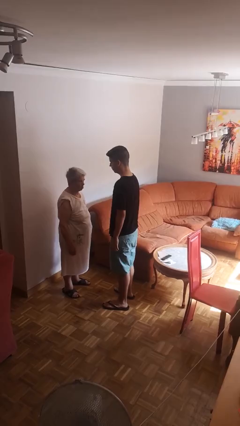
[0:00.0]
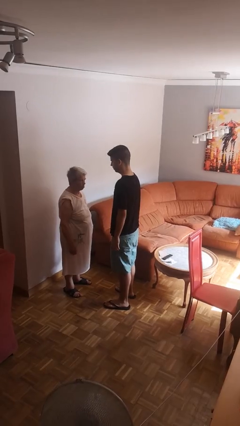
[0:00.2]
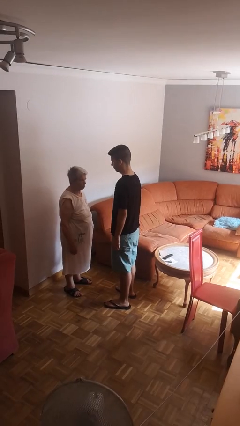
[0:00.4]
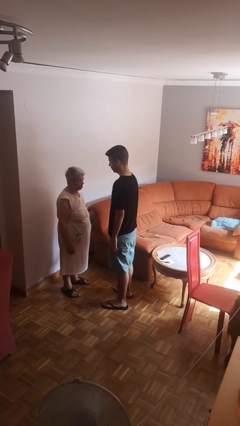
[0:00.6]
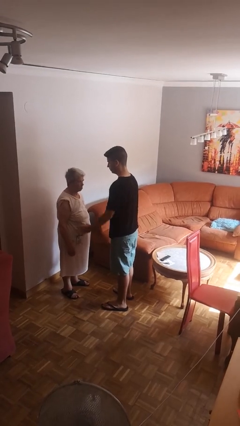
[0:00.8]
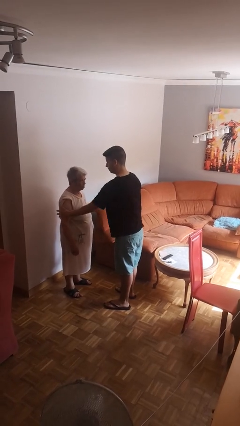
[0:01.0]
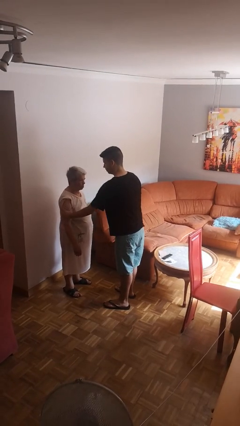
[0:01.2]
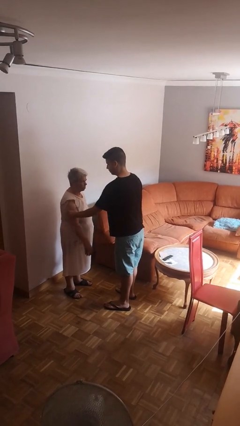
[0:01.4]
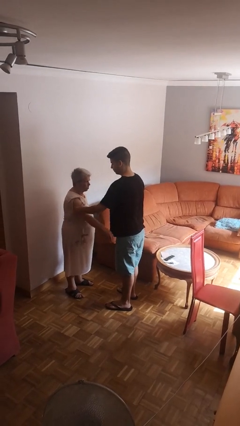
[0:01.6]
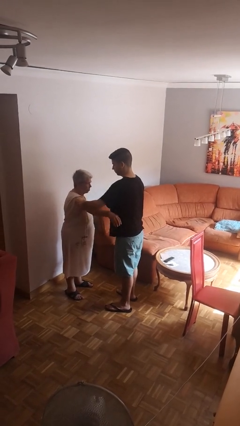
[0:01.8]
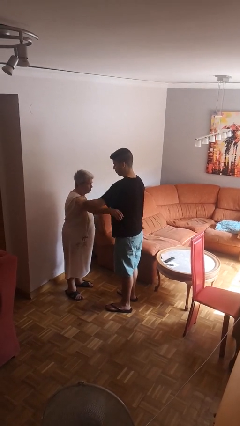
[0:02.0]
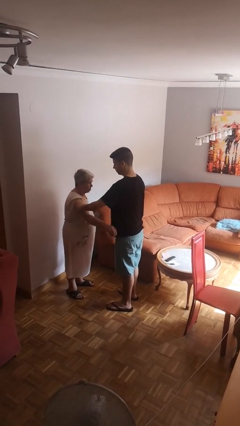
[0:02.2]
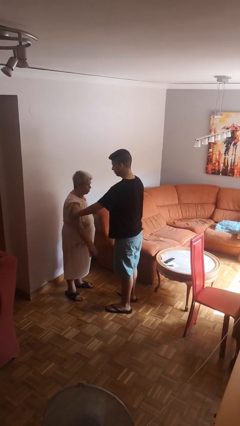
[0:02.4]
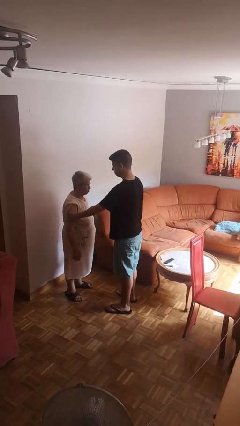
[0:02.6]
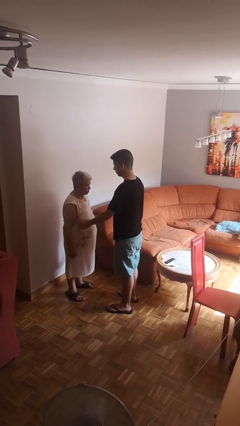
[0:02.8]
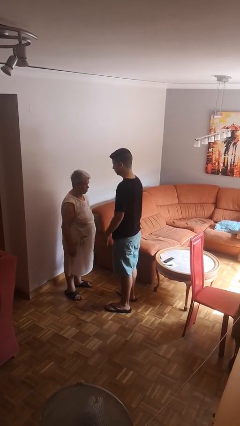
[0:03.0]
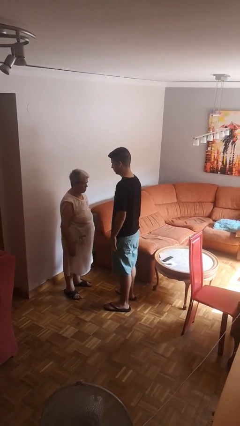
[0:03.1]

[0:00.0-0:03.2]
person grabs person by bicep

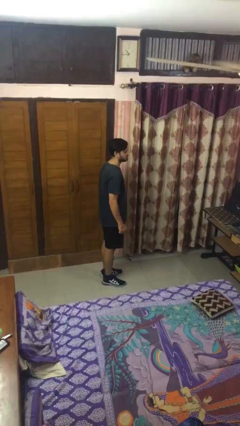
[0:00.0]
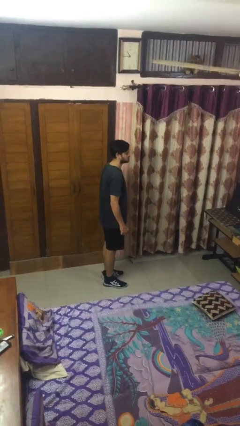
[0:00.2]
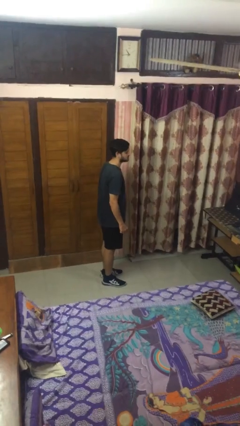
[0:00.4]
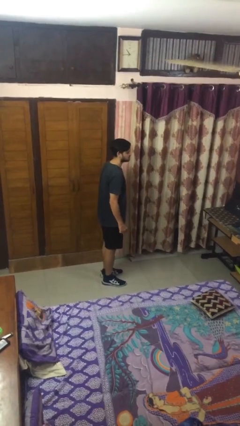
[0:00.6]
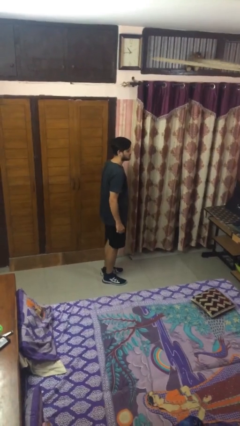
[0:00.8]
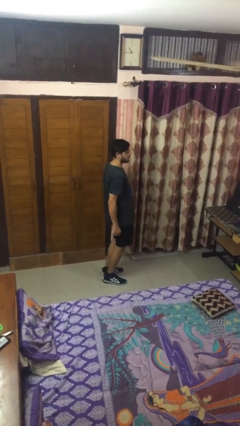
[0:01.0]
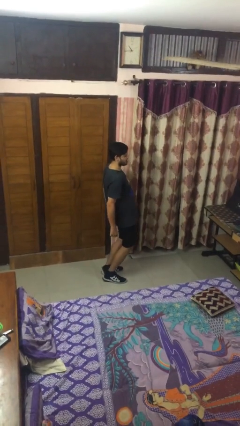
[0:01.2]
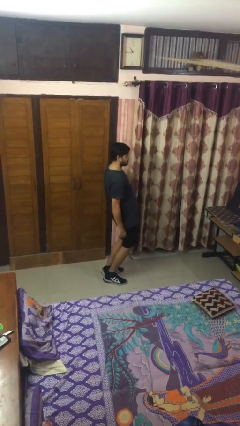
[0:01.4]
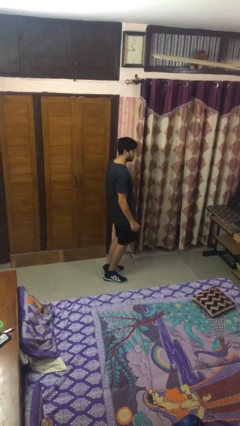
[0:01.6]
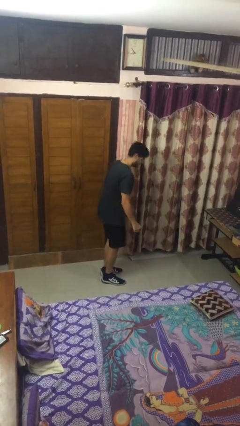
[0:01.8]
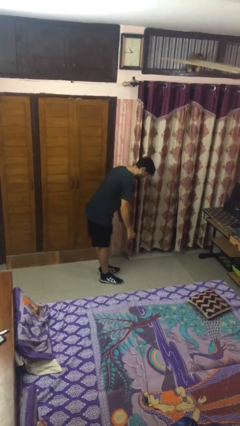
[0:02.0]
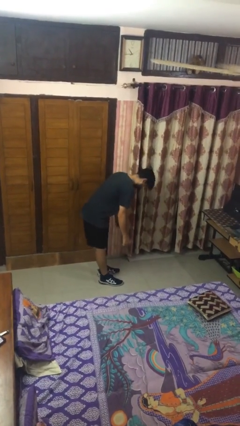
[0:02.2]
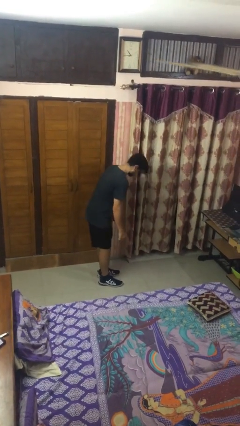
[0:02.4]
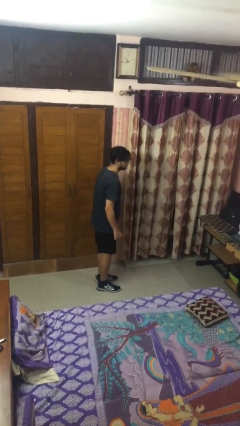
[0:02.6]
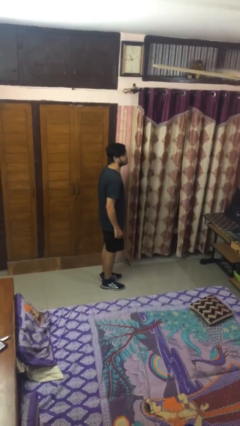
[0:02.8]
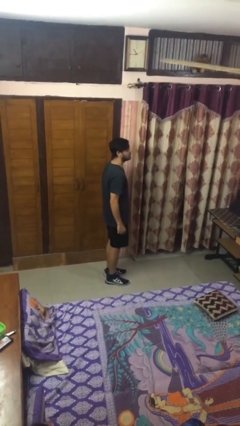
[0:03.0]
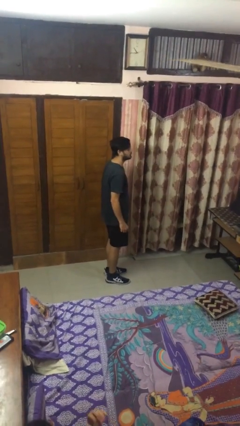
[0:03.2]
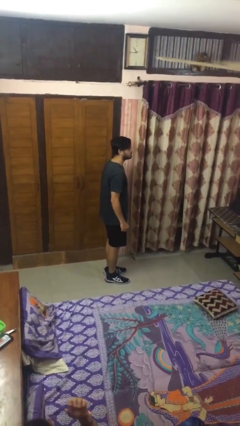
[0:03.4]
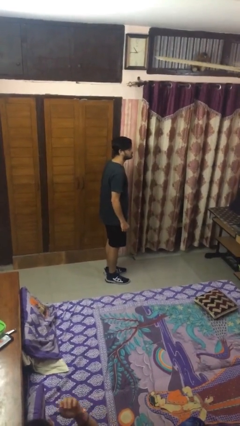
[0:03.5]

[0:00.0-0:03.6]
person wiggles hips

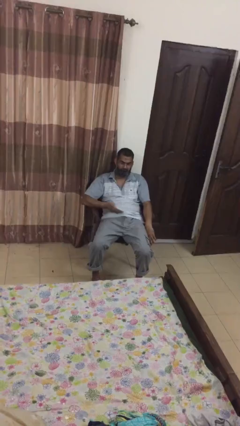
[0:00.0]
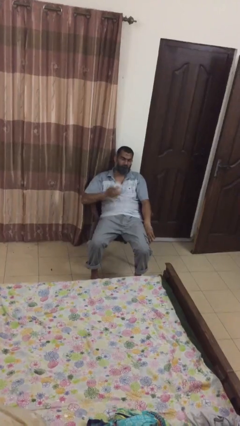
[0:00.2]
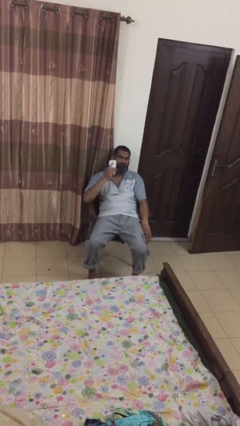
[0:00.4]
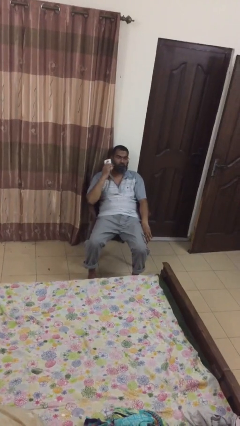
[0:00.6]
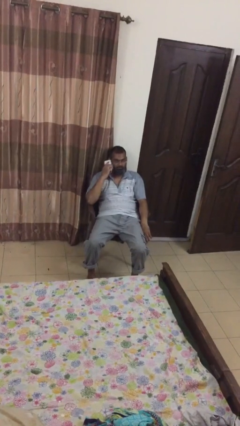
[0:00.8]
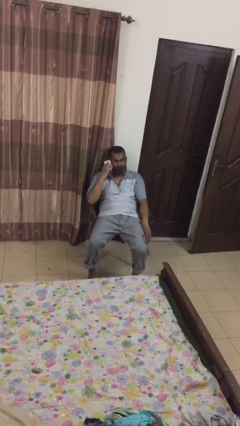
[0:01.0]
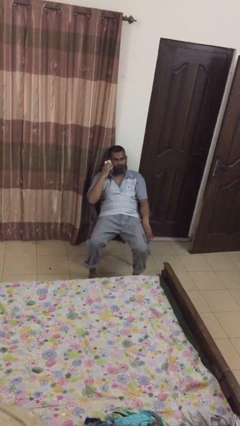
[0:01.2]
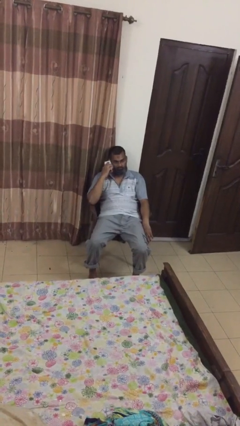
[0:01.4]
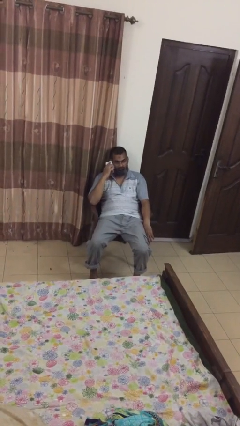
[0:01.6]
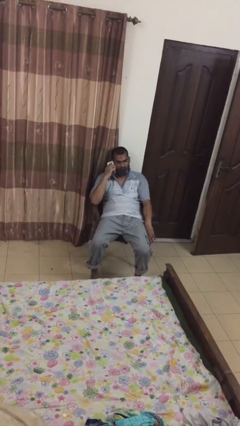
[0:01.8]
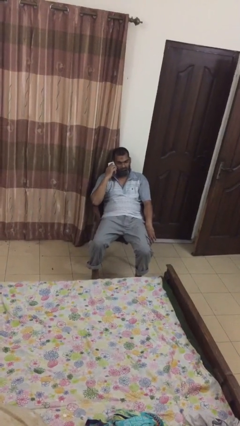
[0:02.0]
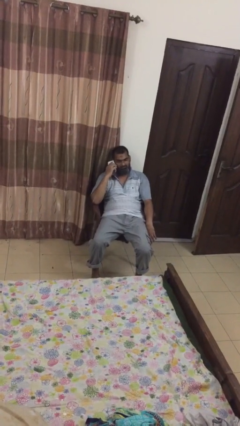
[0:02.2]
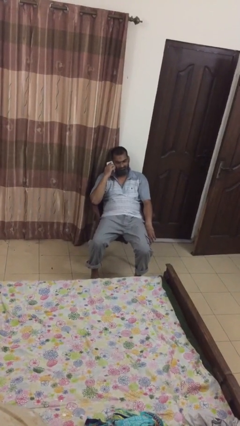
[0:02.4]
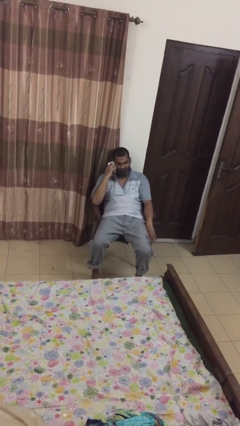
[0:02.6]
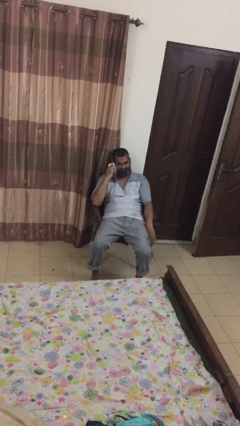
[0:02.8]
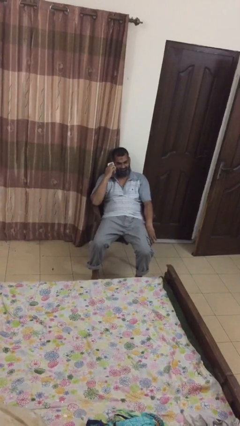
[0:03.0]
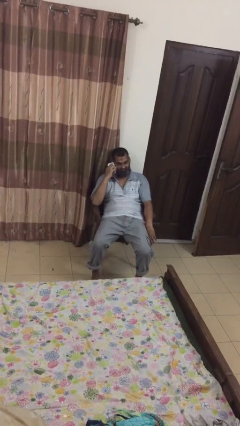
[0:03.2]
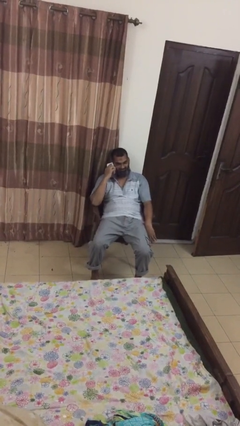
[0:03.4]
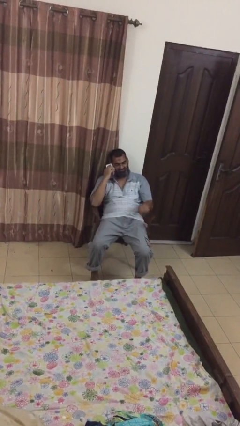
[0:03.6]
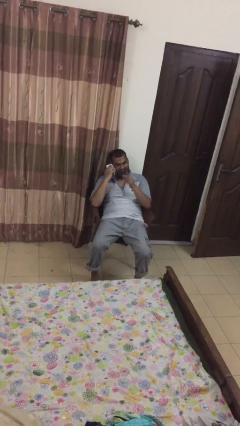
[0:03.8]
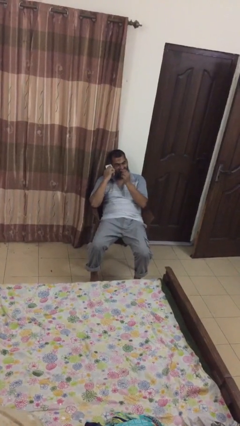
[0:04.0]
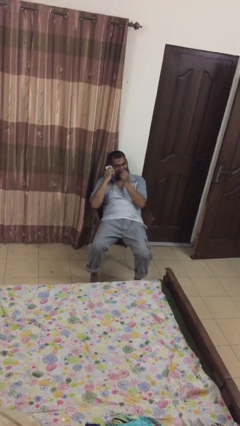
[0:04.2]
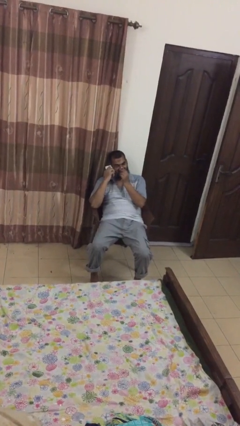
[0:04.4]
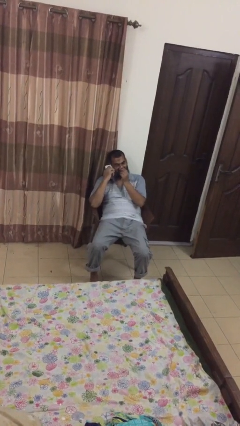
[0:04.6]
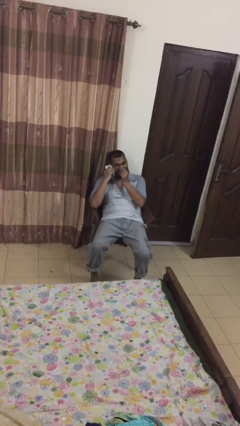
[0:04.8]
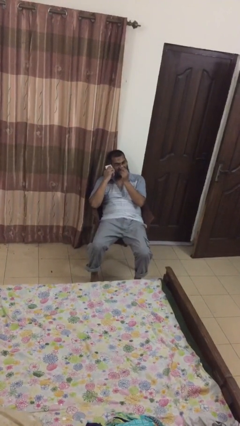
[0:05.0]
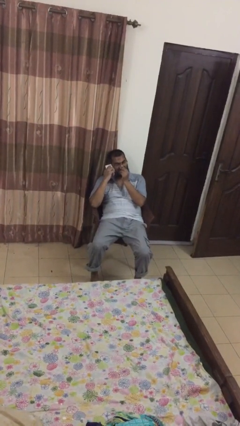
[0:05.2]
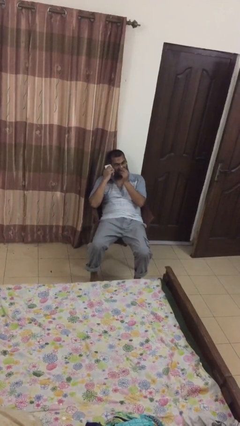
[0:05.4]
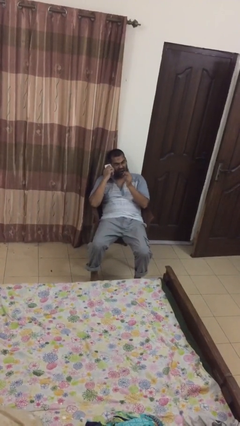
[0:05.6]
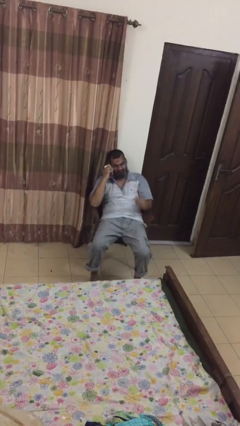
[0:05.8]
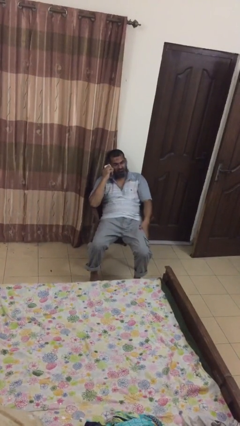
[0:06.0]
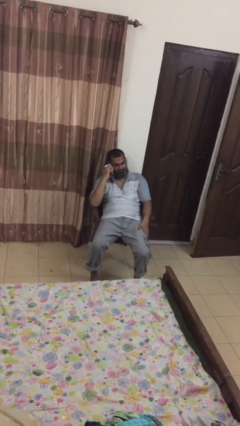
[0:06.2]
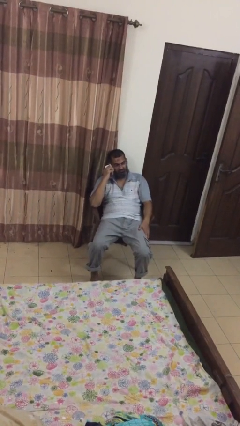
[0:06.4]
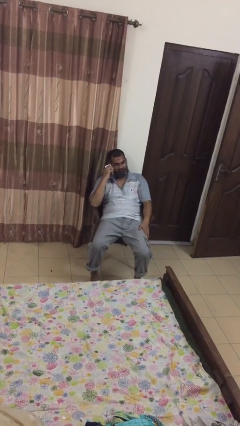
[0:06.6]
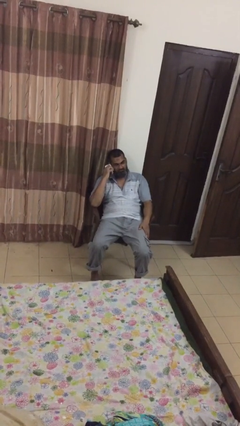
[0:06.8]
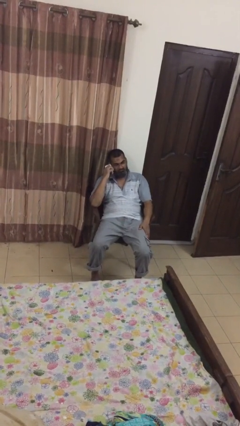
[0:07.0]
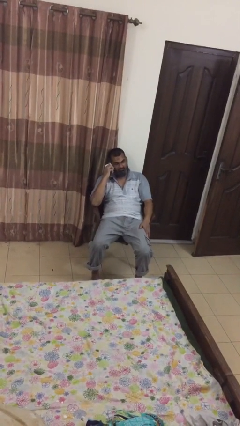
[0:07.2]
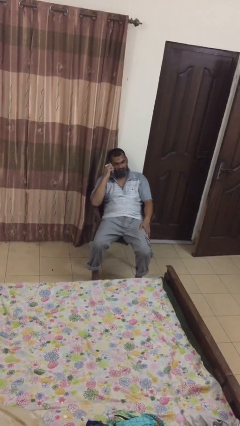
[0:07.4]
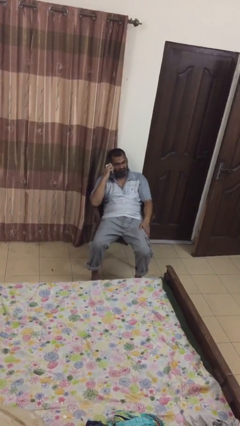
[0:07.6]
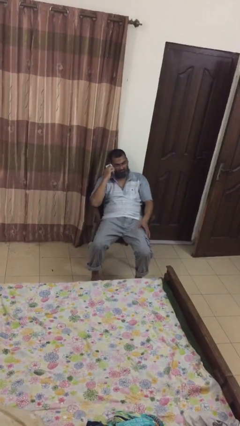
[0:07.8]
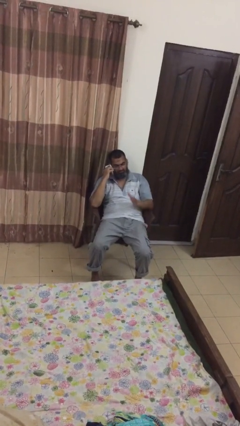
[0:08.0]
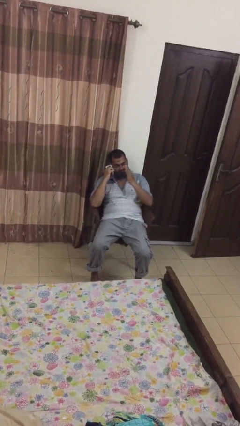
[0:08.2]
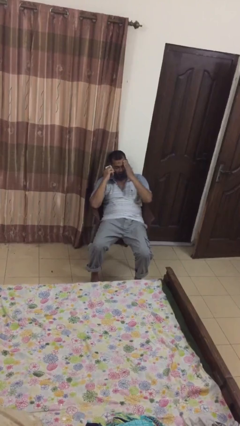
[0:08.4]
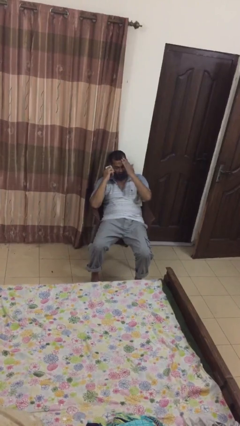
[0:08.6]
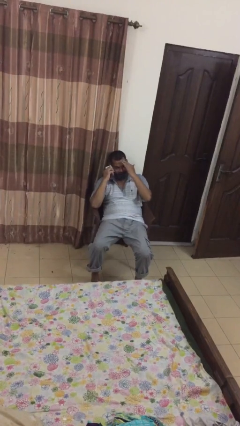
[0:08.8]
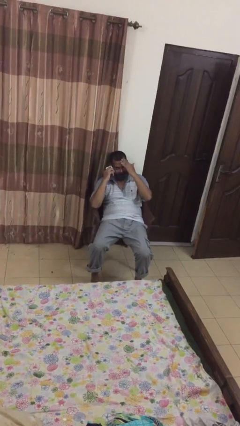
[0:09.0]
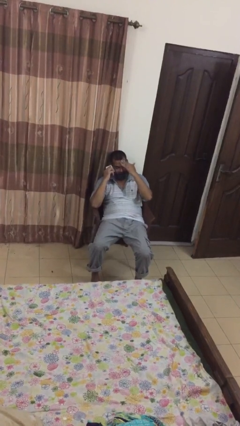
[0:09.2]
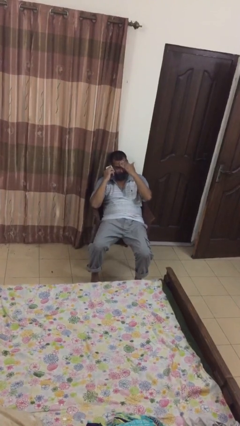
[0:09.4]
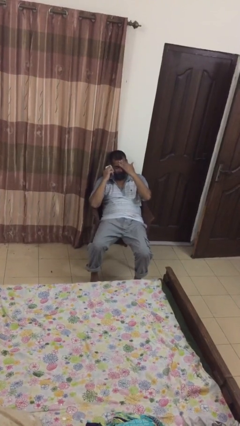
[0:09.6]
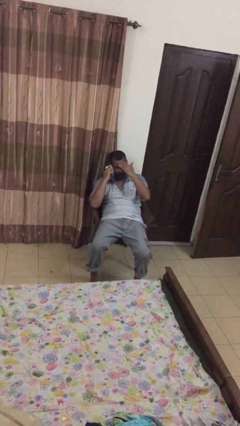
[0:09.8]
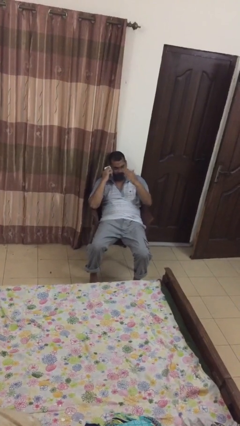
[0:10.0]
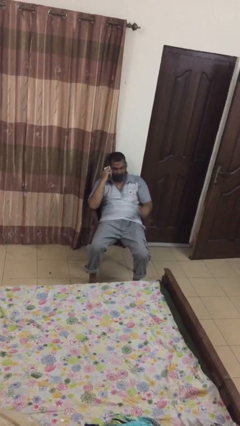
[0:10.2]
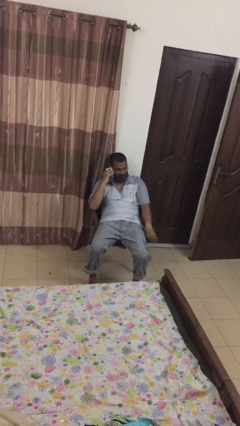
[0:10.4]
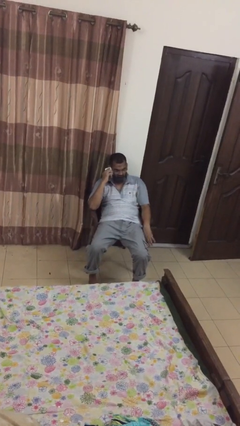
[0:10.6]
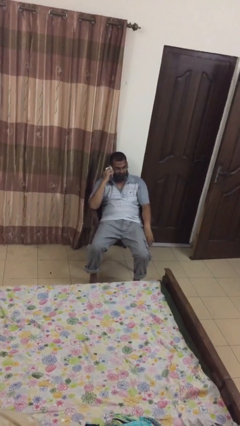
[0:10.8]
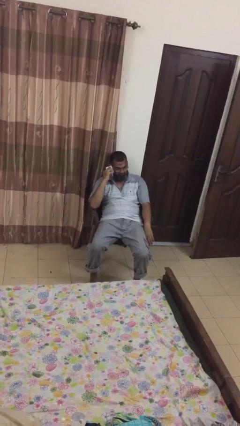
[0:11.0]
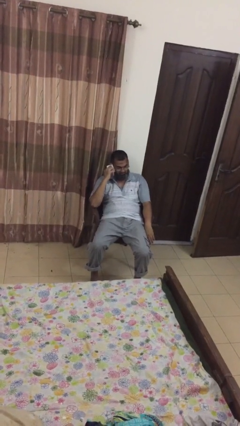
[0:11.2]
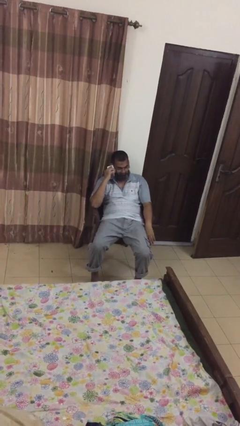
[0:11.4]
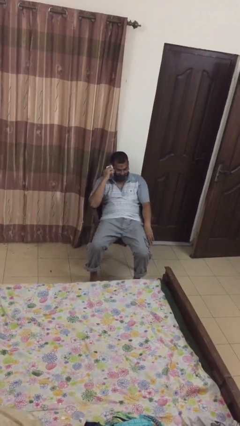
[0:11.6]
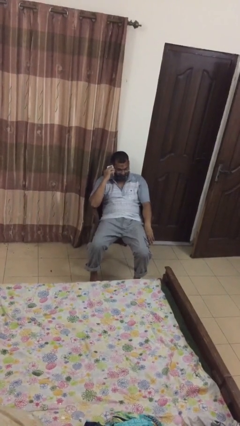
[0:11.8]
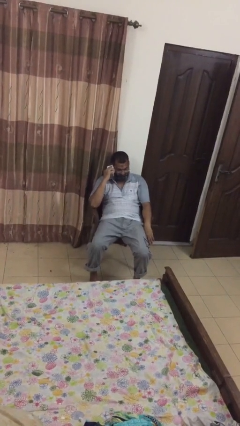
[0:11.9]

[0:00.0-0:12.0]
person talks on phone
